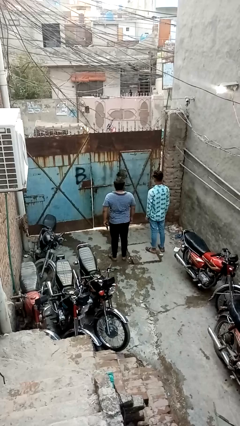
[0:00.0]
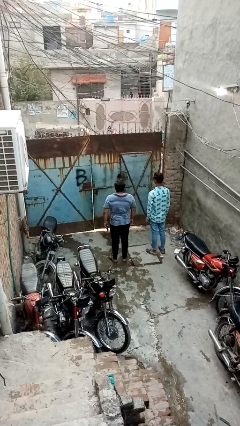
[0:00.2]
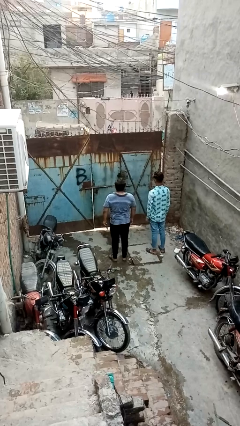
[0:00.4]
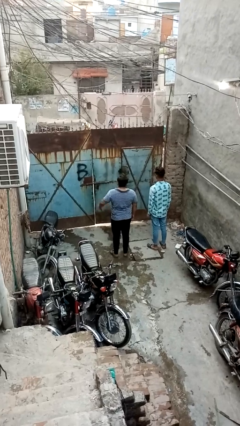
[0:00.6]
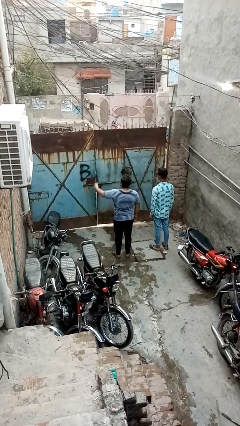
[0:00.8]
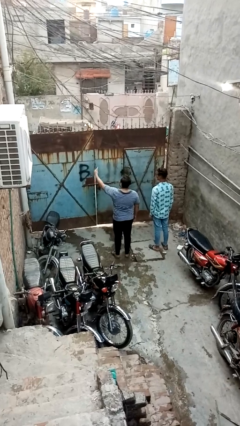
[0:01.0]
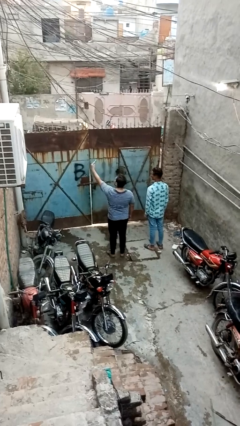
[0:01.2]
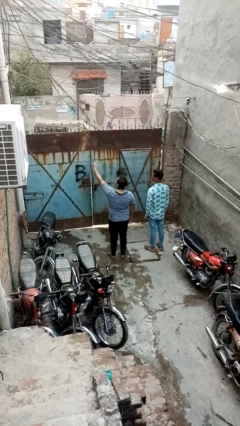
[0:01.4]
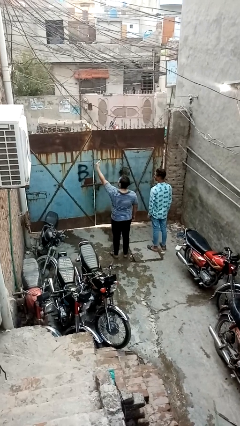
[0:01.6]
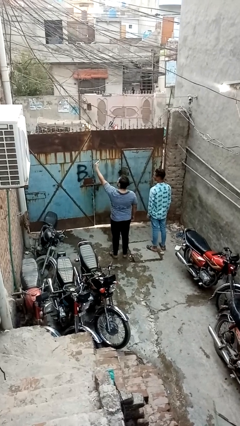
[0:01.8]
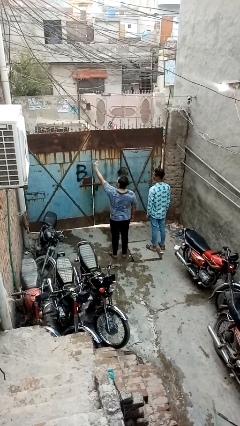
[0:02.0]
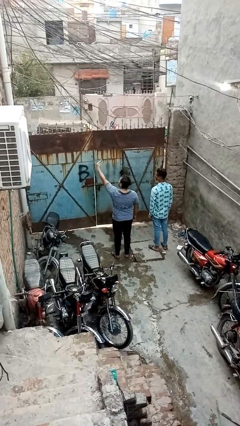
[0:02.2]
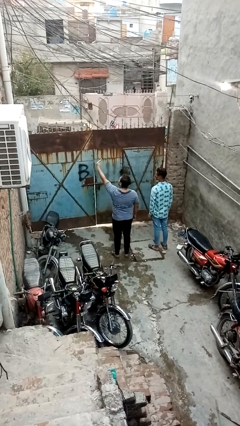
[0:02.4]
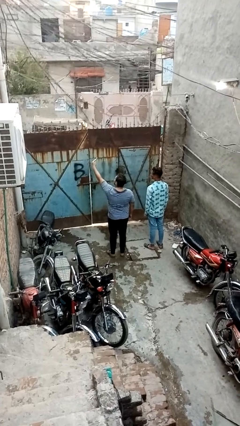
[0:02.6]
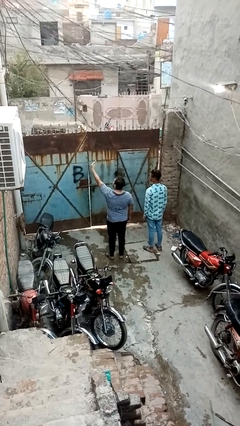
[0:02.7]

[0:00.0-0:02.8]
person takes selfie with person

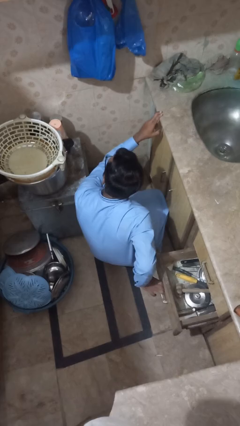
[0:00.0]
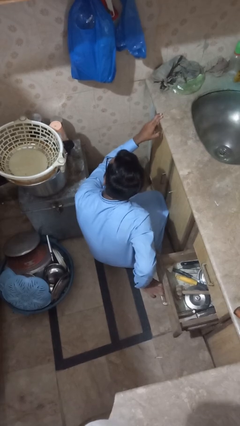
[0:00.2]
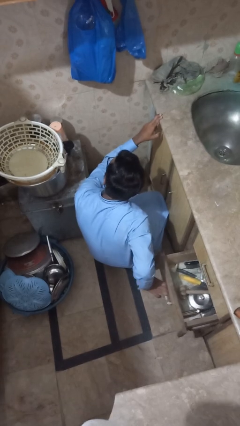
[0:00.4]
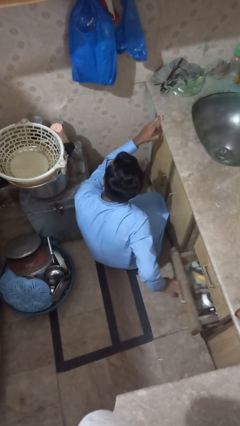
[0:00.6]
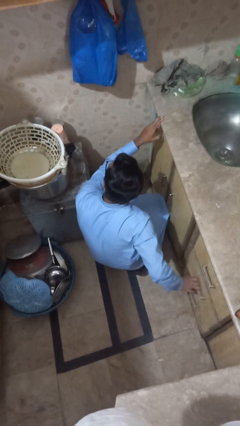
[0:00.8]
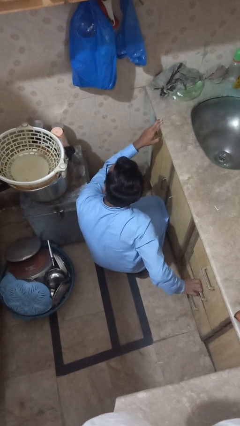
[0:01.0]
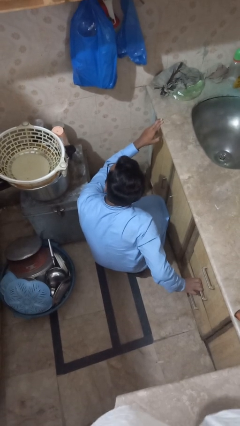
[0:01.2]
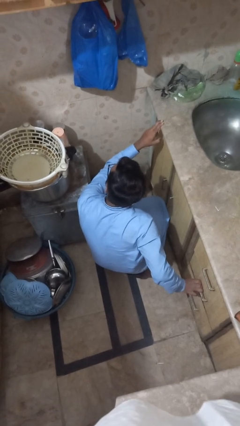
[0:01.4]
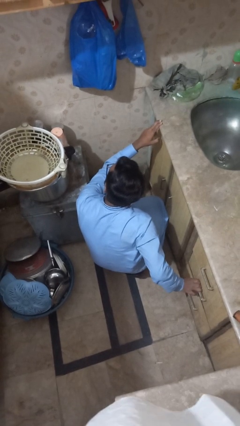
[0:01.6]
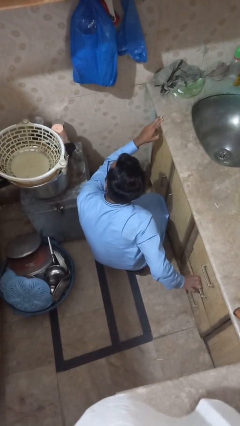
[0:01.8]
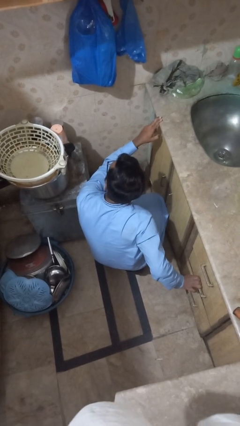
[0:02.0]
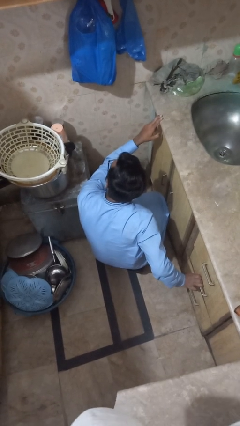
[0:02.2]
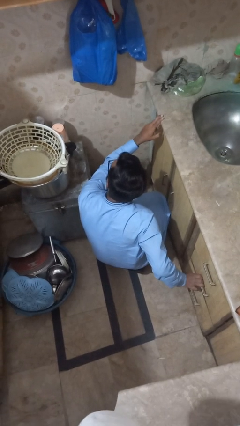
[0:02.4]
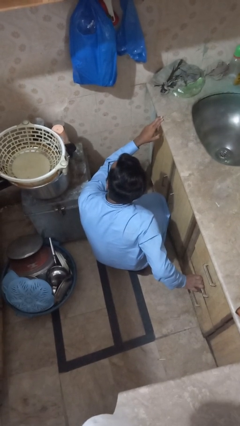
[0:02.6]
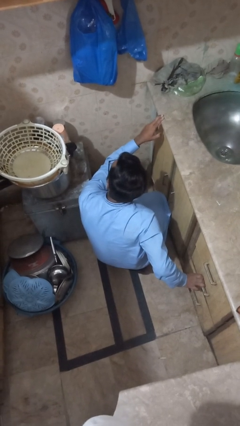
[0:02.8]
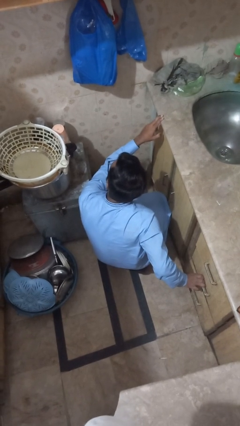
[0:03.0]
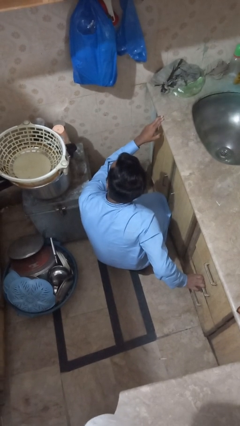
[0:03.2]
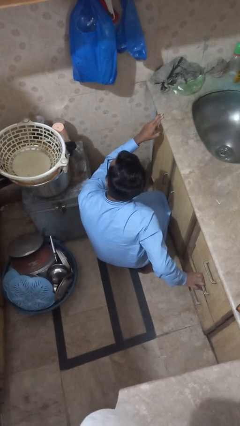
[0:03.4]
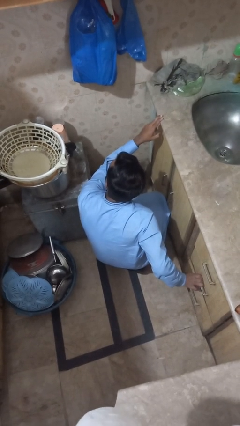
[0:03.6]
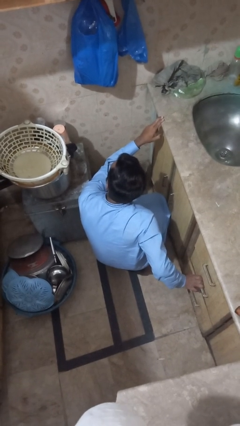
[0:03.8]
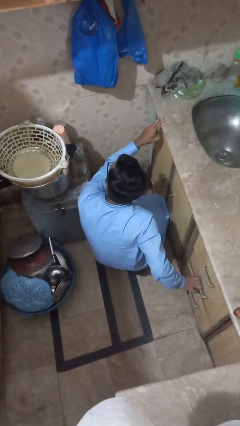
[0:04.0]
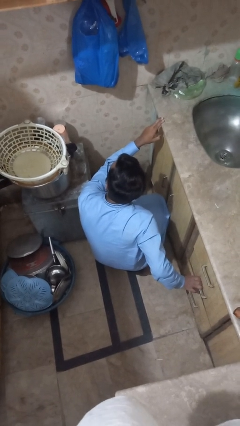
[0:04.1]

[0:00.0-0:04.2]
person closes kitchen drawer

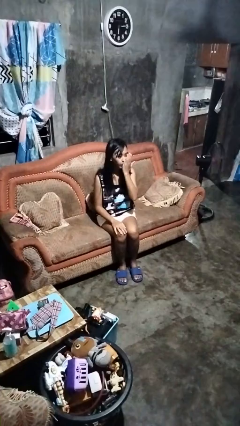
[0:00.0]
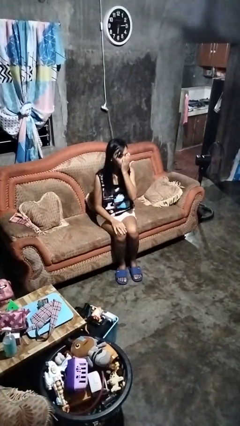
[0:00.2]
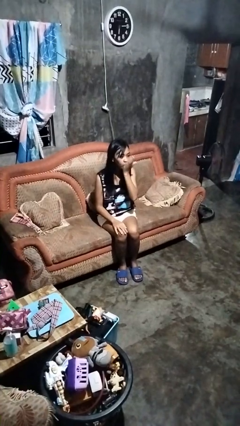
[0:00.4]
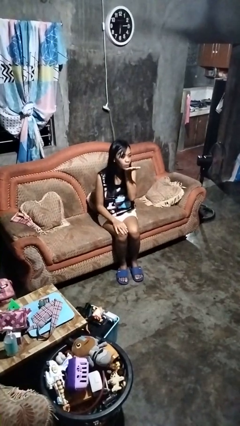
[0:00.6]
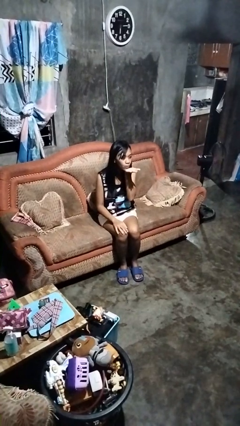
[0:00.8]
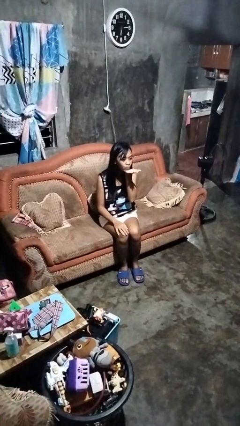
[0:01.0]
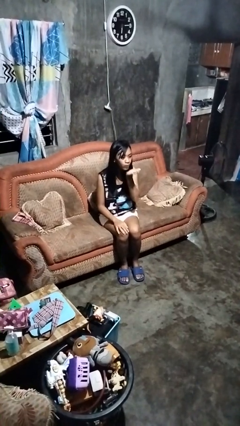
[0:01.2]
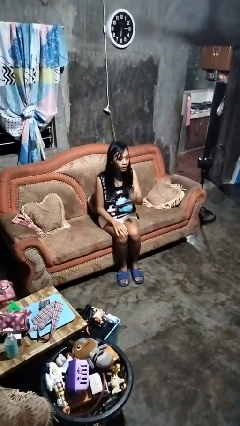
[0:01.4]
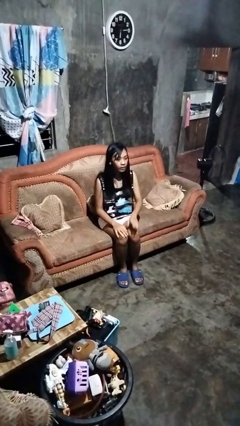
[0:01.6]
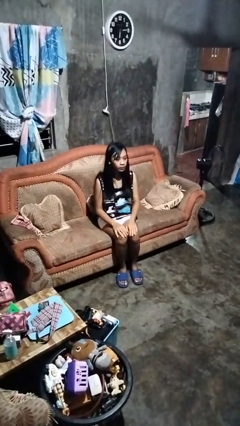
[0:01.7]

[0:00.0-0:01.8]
person gestures blow kiss

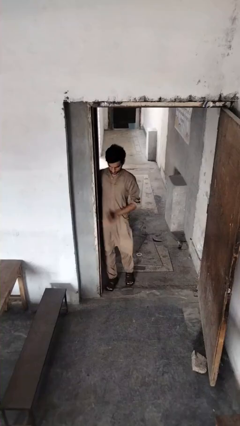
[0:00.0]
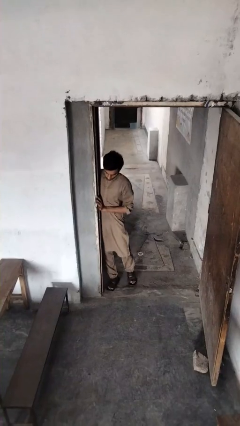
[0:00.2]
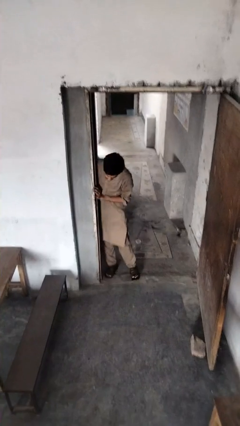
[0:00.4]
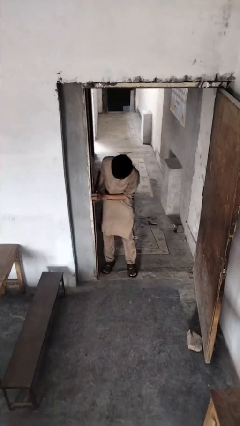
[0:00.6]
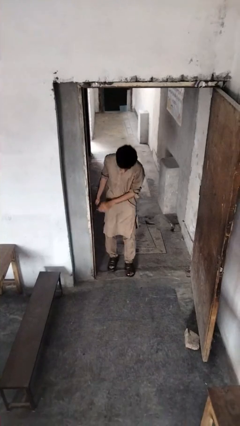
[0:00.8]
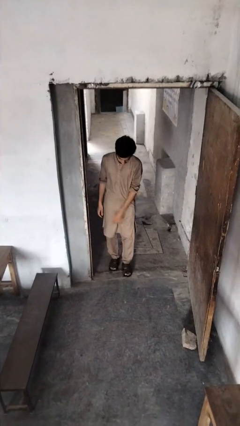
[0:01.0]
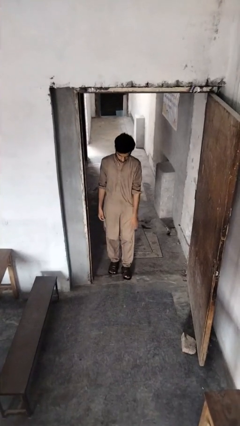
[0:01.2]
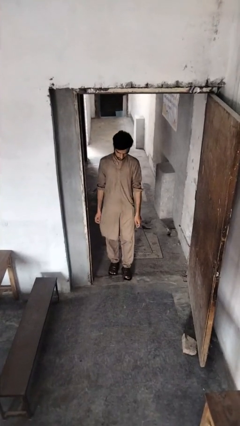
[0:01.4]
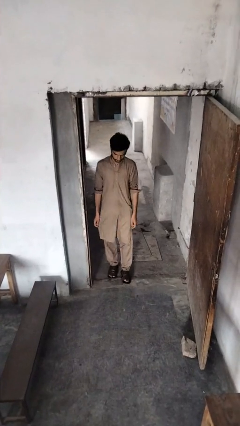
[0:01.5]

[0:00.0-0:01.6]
person bumps into wall

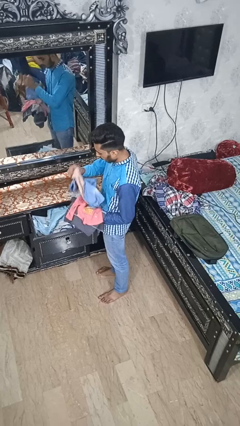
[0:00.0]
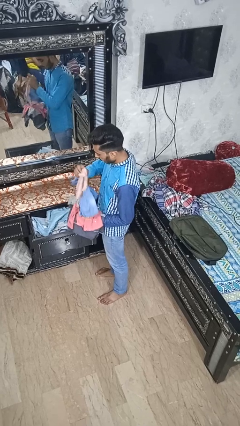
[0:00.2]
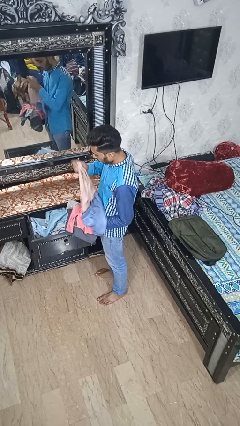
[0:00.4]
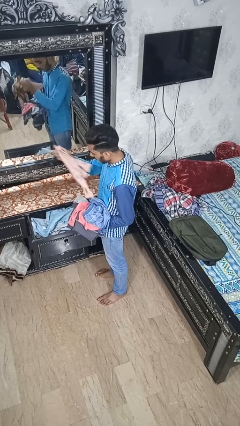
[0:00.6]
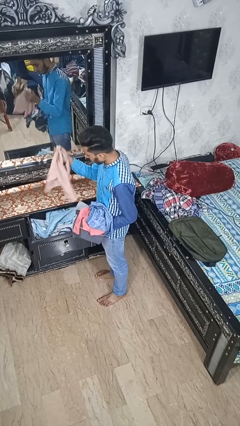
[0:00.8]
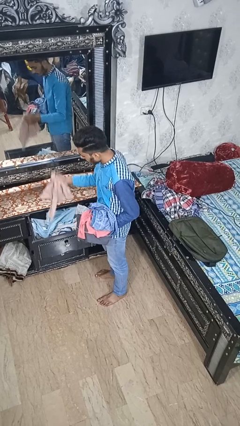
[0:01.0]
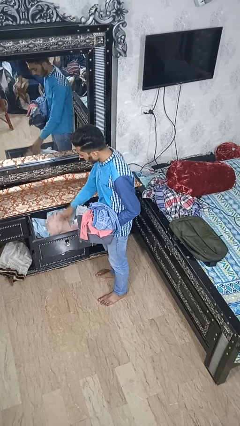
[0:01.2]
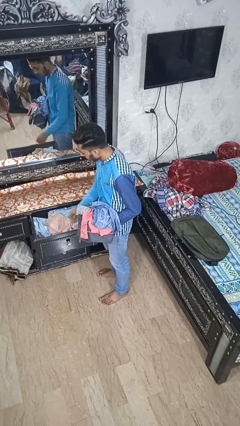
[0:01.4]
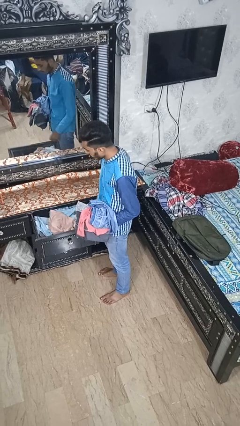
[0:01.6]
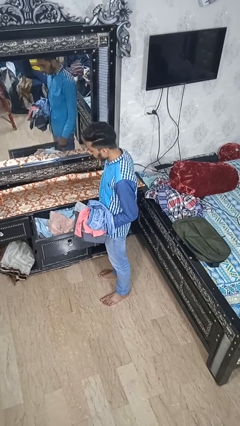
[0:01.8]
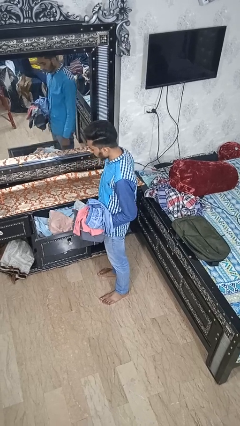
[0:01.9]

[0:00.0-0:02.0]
person puts clothes into dresser

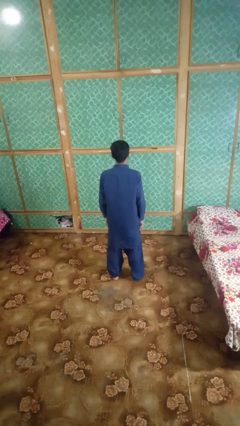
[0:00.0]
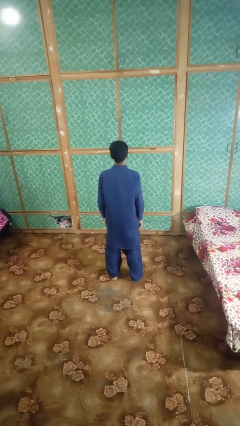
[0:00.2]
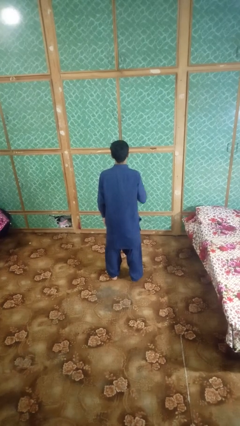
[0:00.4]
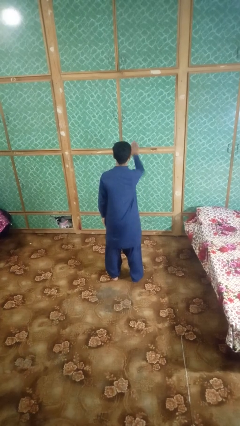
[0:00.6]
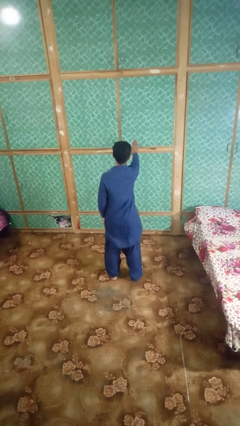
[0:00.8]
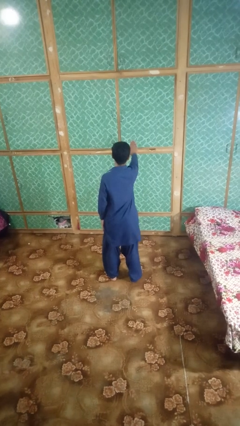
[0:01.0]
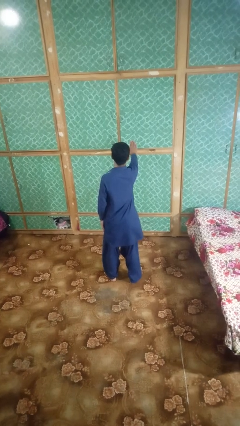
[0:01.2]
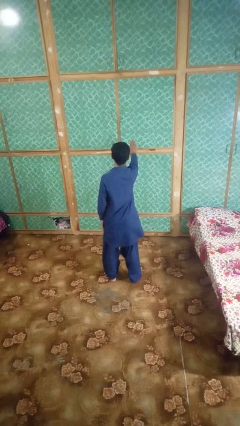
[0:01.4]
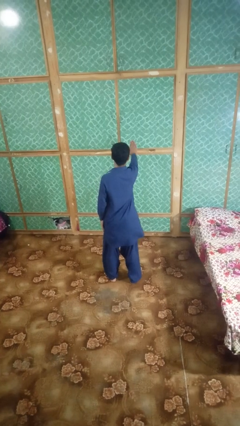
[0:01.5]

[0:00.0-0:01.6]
person gestures stop

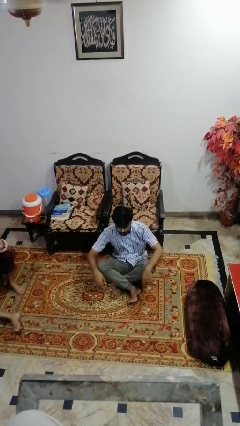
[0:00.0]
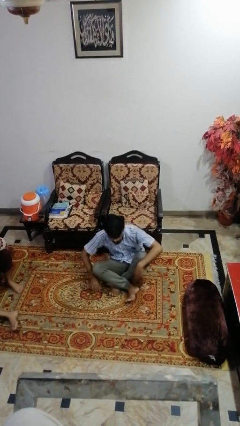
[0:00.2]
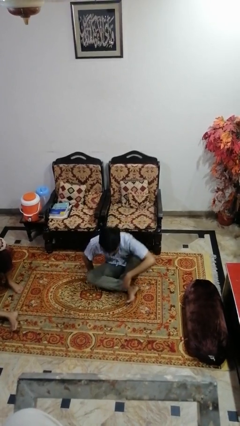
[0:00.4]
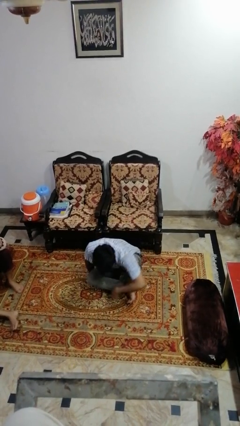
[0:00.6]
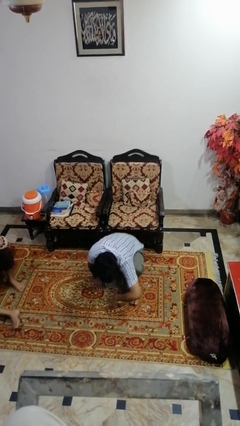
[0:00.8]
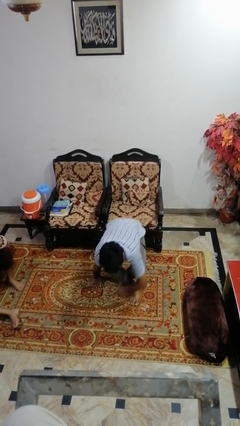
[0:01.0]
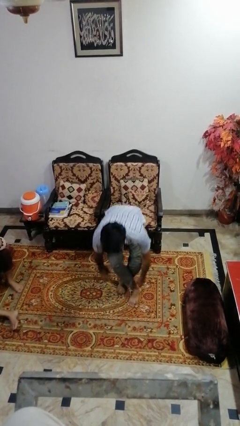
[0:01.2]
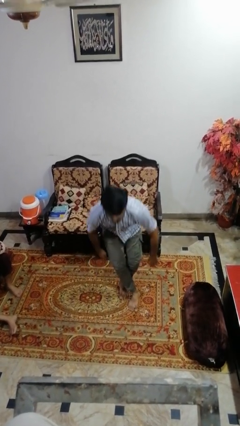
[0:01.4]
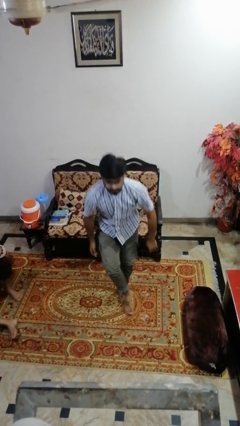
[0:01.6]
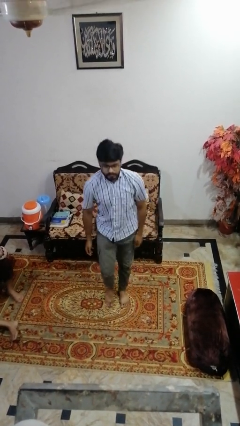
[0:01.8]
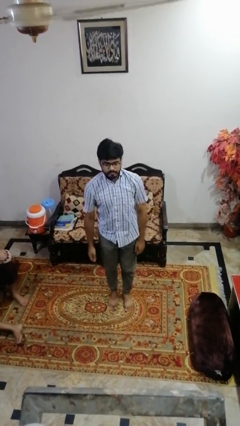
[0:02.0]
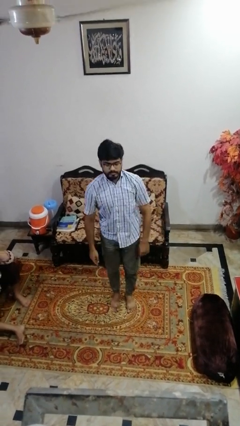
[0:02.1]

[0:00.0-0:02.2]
person stands up from floor

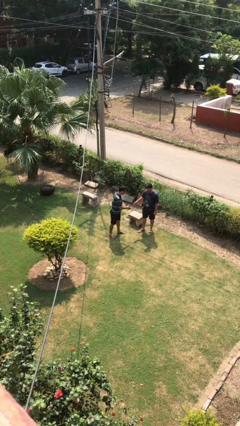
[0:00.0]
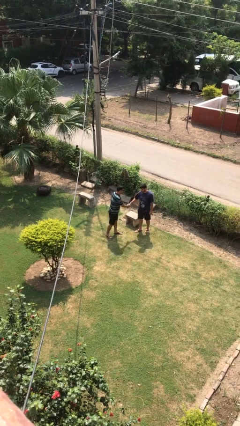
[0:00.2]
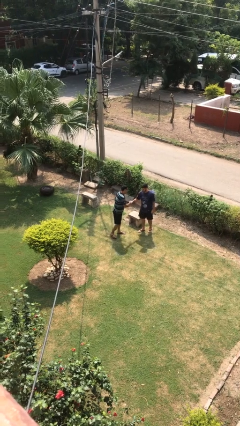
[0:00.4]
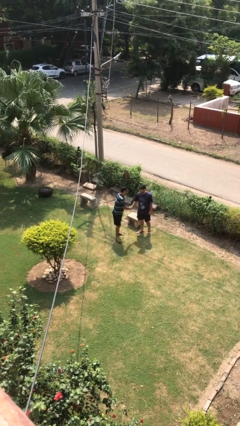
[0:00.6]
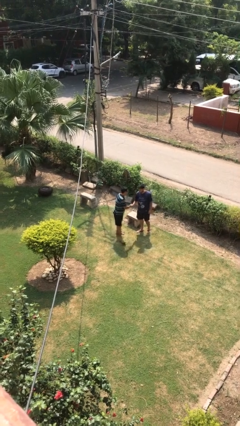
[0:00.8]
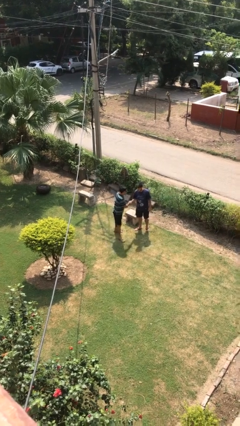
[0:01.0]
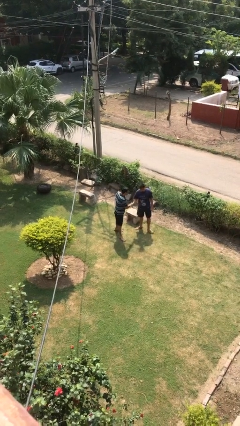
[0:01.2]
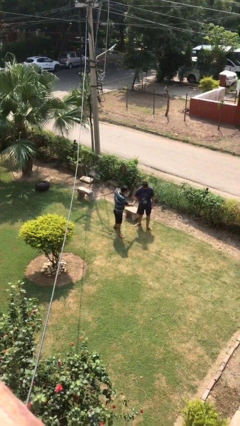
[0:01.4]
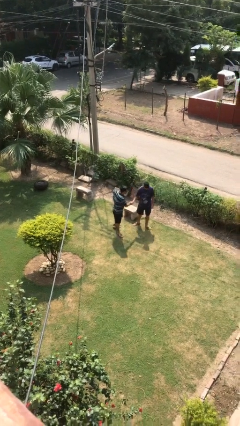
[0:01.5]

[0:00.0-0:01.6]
person shakes hand
